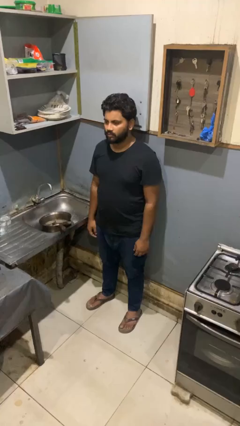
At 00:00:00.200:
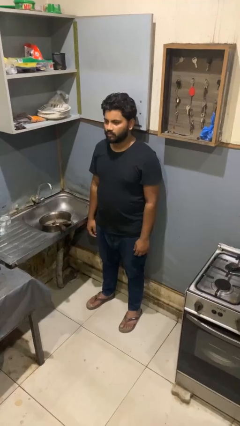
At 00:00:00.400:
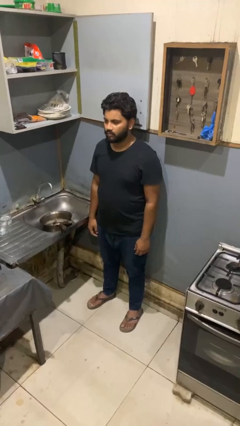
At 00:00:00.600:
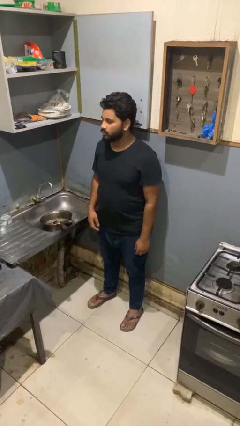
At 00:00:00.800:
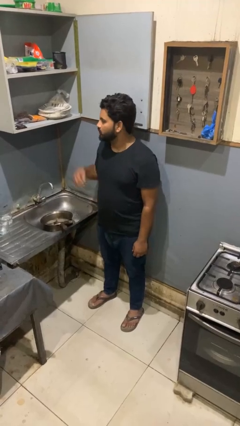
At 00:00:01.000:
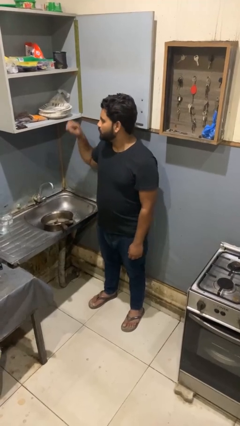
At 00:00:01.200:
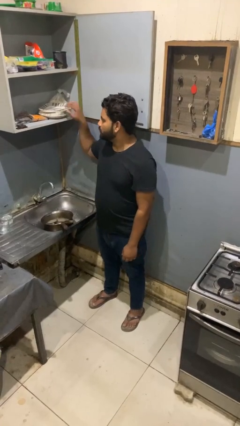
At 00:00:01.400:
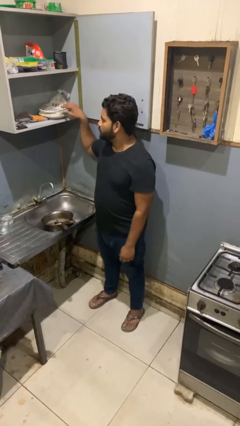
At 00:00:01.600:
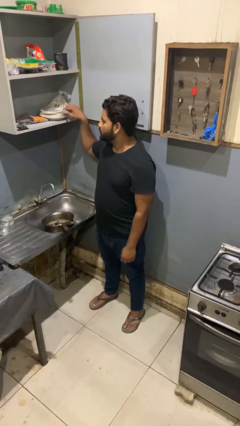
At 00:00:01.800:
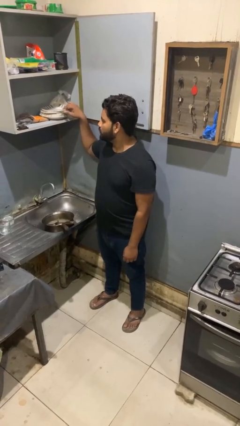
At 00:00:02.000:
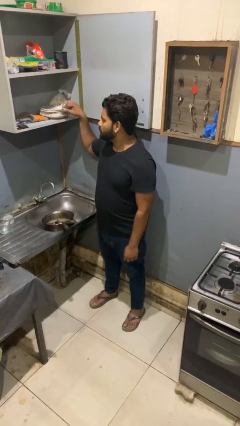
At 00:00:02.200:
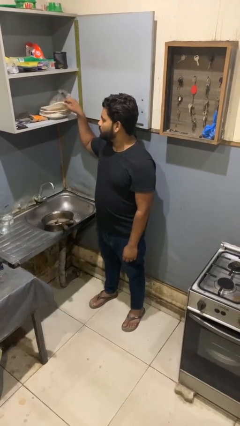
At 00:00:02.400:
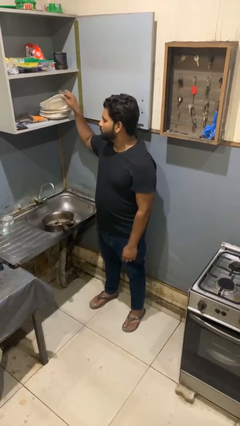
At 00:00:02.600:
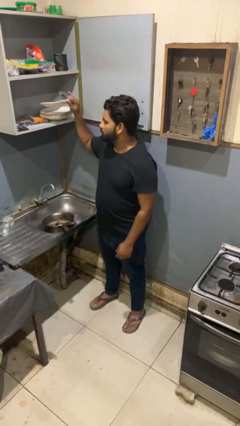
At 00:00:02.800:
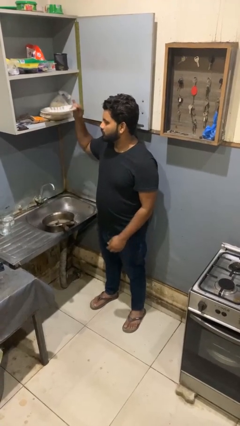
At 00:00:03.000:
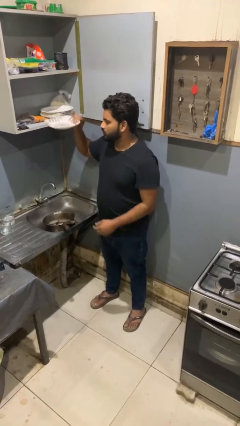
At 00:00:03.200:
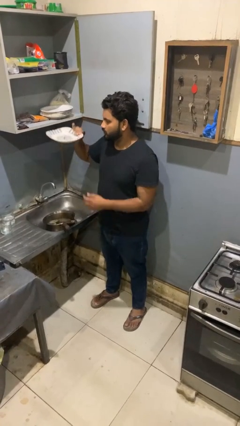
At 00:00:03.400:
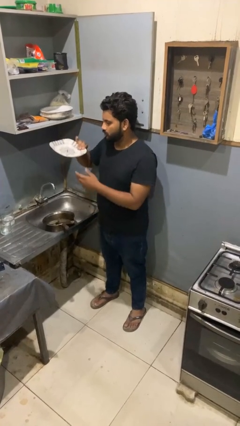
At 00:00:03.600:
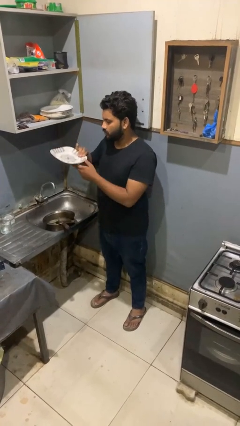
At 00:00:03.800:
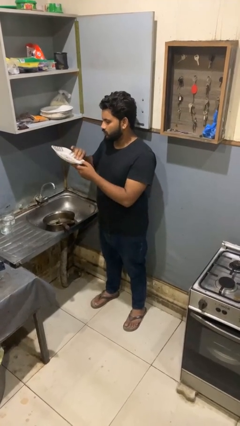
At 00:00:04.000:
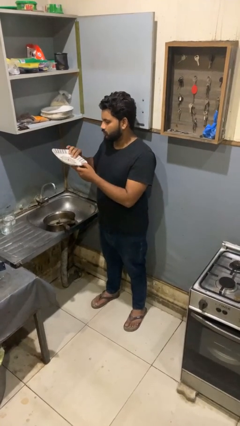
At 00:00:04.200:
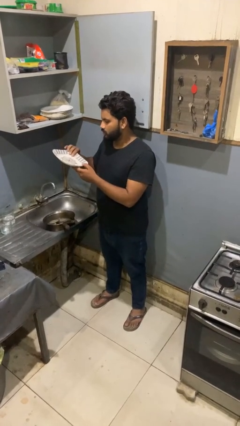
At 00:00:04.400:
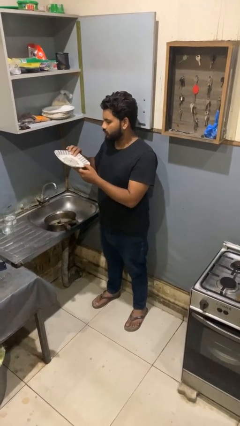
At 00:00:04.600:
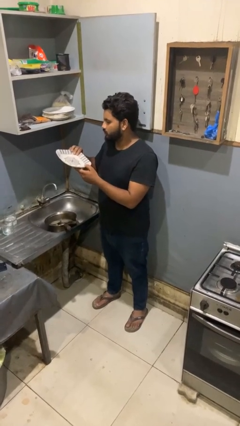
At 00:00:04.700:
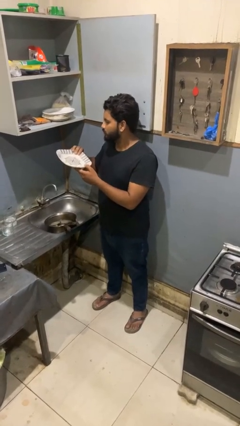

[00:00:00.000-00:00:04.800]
person takes object from kitchen drawer

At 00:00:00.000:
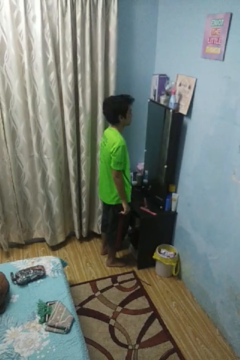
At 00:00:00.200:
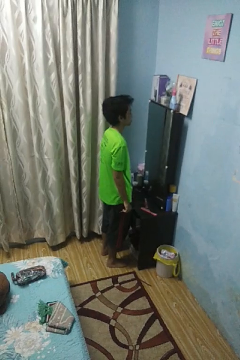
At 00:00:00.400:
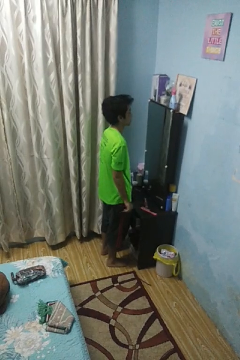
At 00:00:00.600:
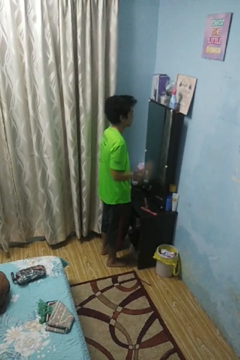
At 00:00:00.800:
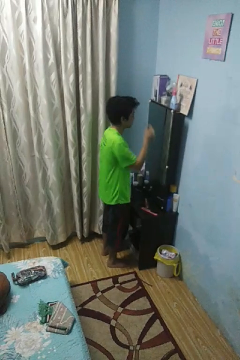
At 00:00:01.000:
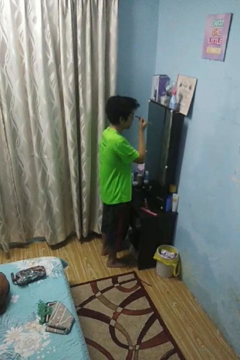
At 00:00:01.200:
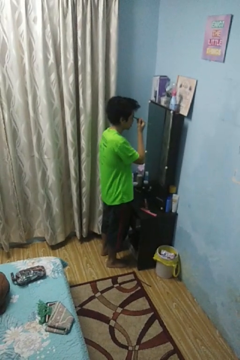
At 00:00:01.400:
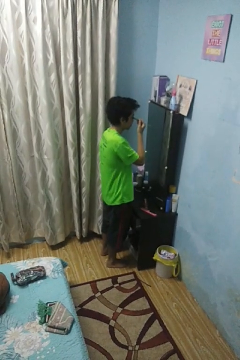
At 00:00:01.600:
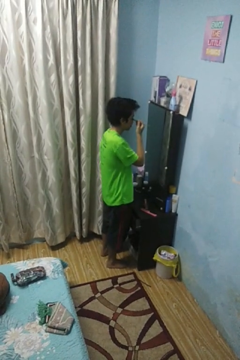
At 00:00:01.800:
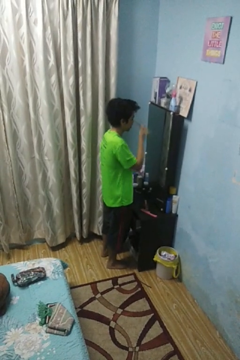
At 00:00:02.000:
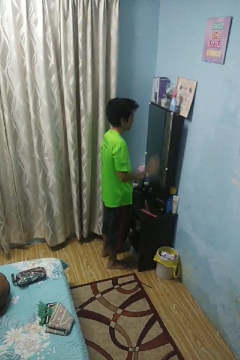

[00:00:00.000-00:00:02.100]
person applies eye makeup

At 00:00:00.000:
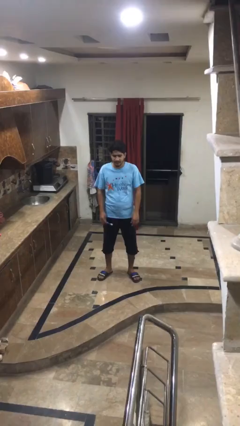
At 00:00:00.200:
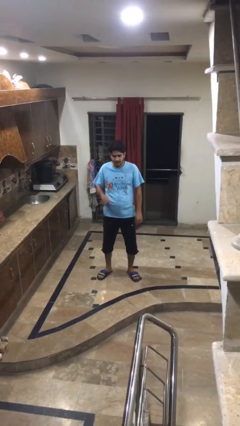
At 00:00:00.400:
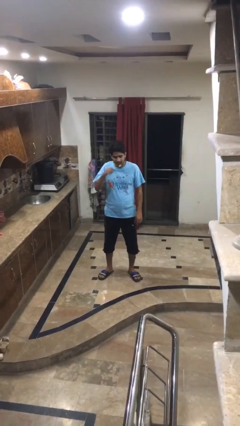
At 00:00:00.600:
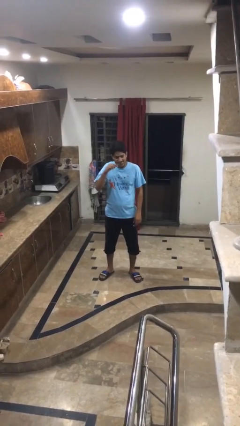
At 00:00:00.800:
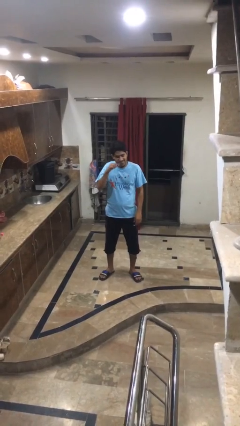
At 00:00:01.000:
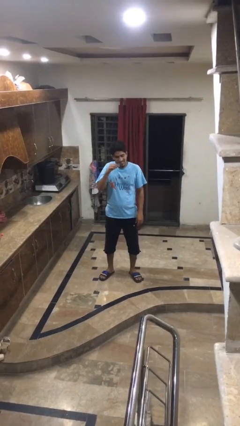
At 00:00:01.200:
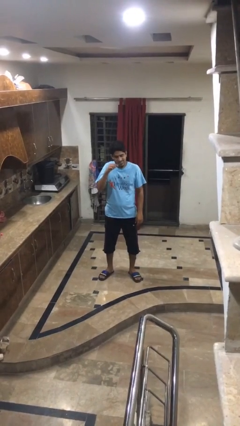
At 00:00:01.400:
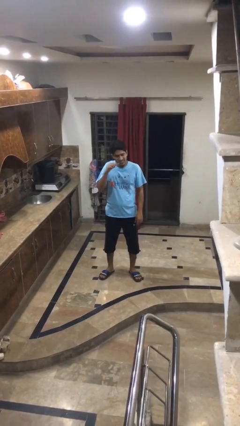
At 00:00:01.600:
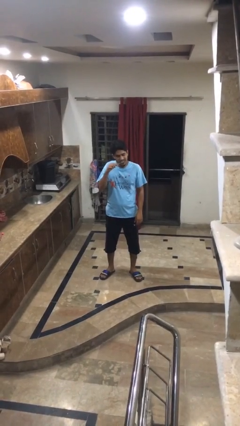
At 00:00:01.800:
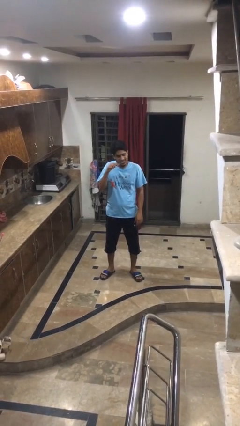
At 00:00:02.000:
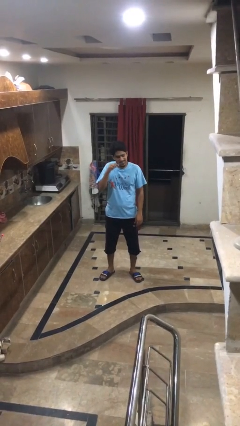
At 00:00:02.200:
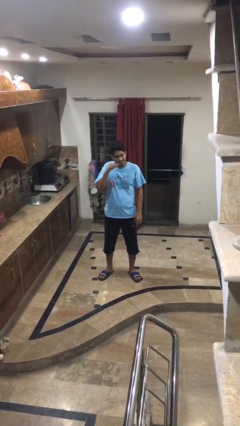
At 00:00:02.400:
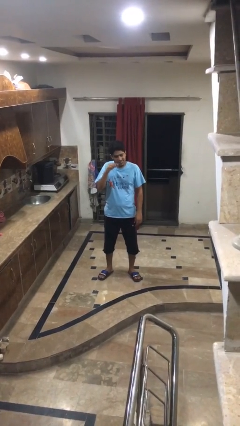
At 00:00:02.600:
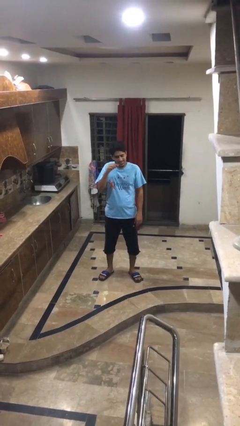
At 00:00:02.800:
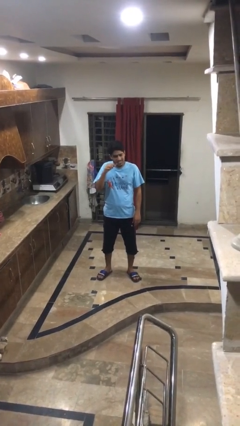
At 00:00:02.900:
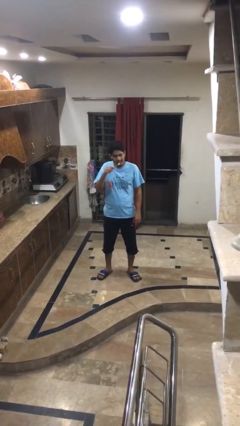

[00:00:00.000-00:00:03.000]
person brushes teeth

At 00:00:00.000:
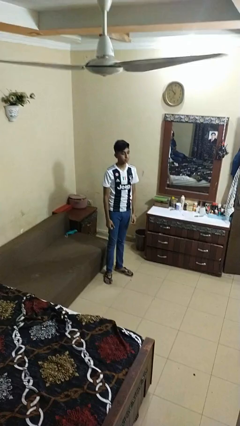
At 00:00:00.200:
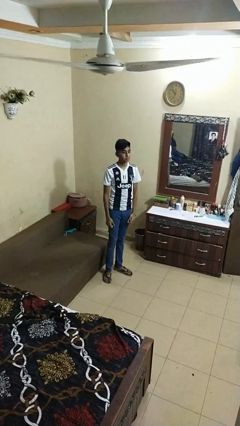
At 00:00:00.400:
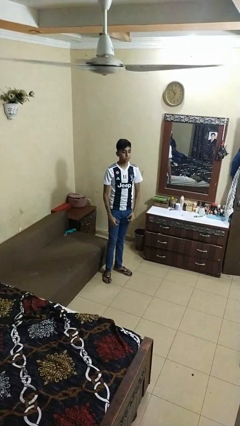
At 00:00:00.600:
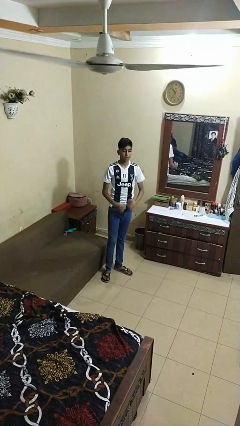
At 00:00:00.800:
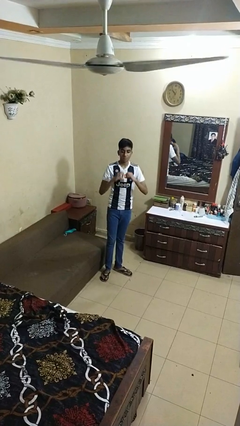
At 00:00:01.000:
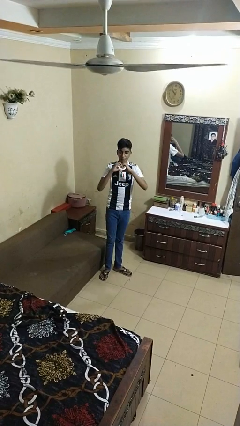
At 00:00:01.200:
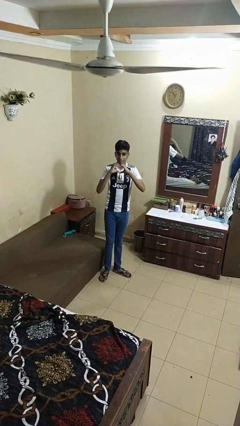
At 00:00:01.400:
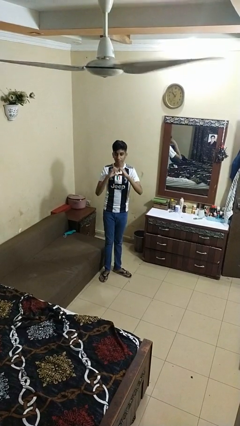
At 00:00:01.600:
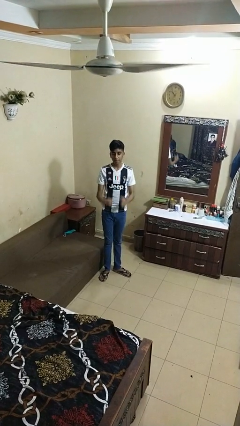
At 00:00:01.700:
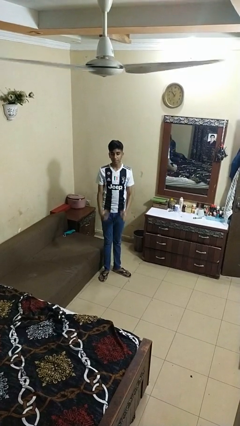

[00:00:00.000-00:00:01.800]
person gestures heart

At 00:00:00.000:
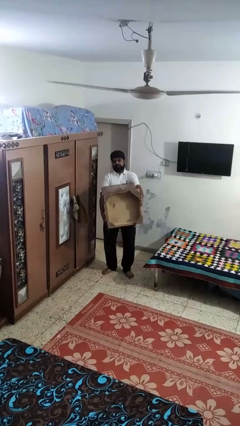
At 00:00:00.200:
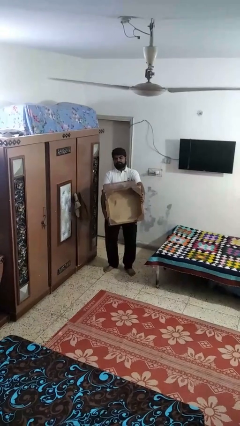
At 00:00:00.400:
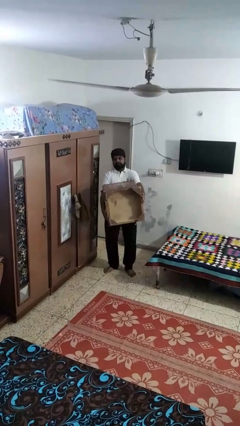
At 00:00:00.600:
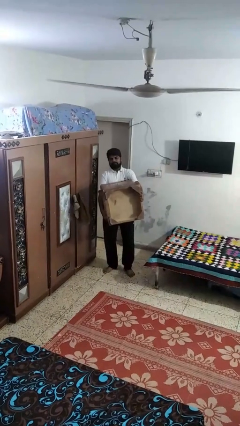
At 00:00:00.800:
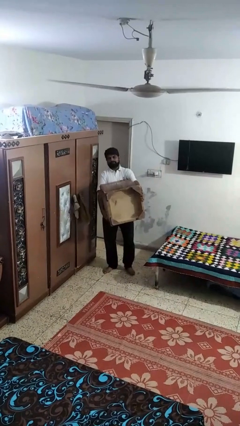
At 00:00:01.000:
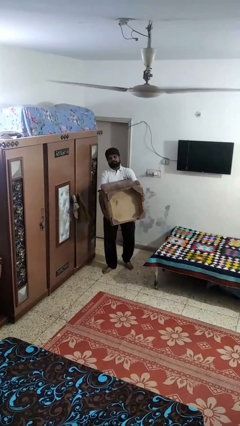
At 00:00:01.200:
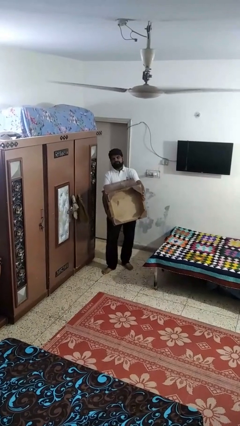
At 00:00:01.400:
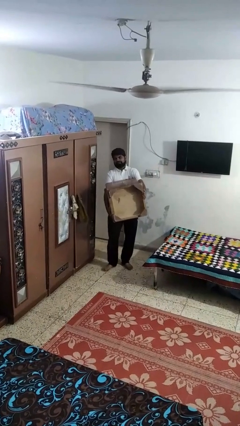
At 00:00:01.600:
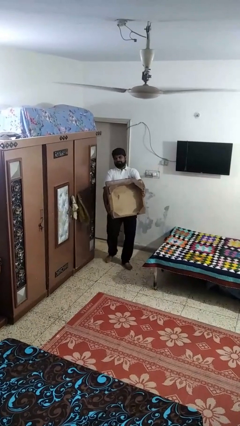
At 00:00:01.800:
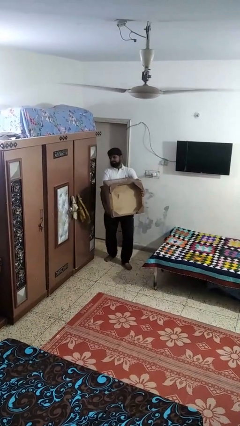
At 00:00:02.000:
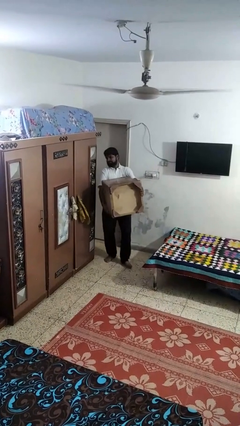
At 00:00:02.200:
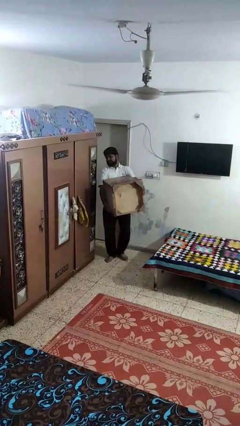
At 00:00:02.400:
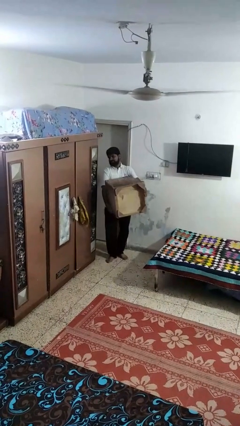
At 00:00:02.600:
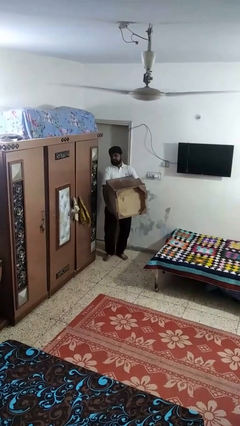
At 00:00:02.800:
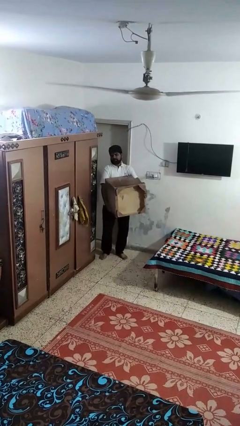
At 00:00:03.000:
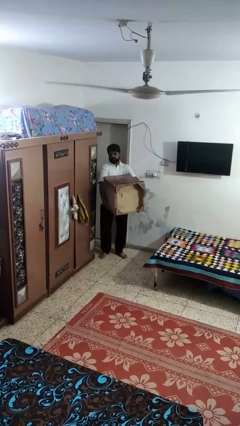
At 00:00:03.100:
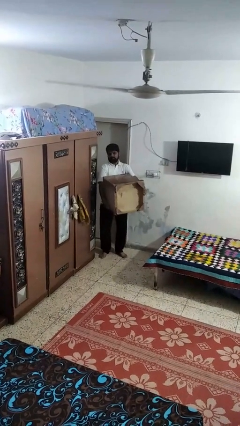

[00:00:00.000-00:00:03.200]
person carries furniture

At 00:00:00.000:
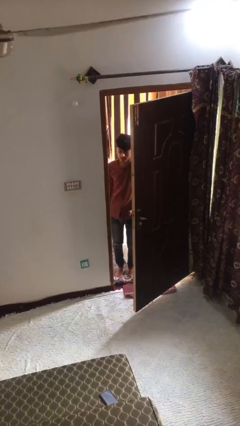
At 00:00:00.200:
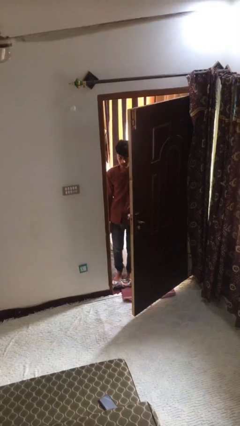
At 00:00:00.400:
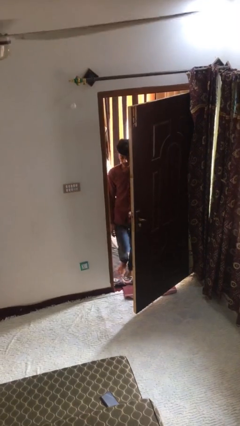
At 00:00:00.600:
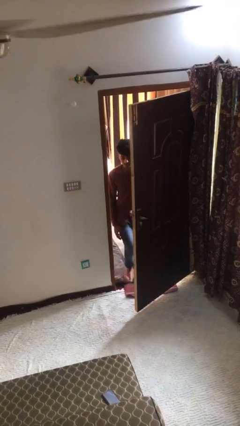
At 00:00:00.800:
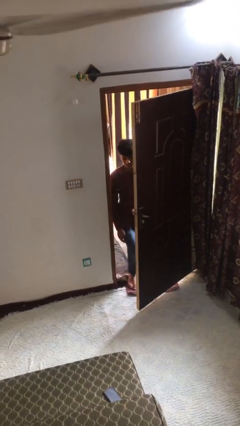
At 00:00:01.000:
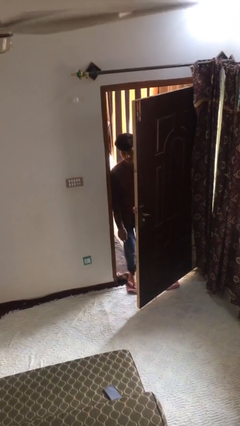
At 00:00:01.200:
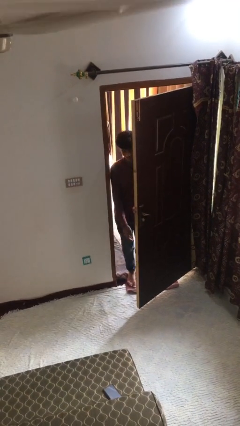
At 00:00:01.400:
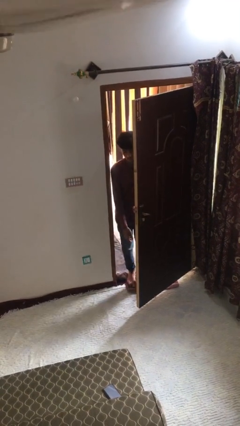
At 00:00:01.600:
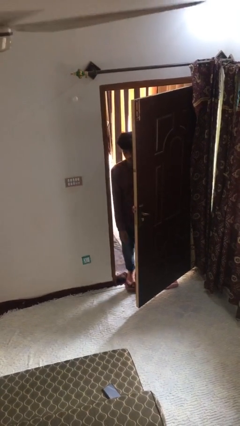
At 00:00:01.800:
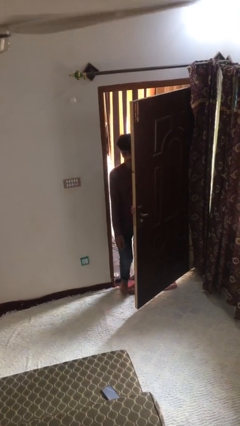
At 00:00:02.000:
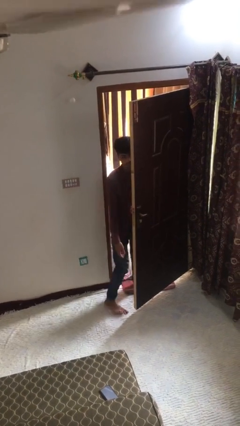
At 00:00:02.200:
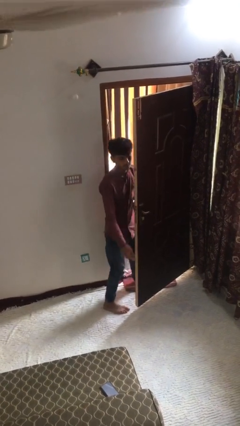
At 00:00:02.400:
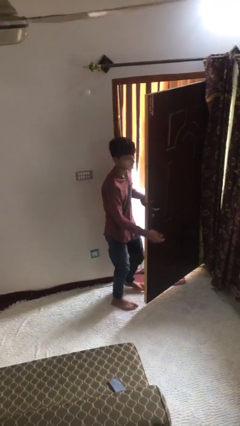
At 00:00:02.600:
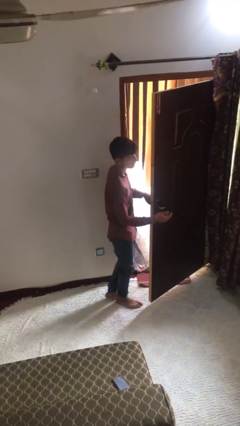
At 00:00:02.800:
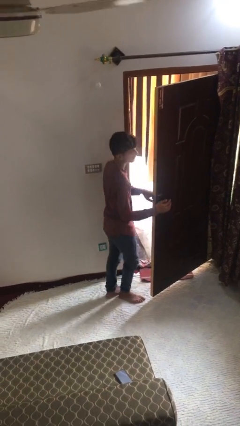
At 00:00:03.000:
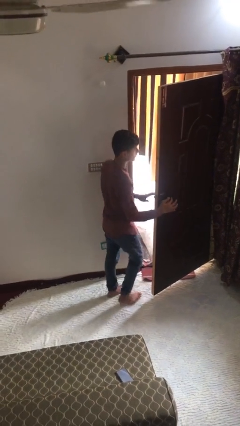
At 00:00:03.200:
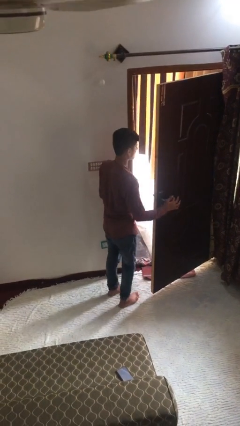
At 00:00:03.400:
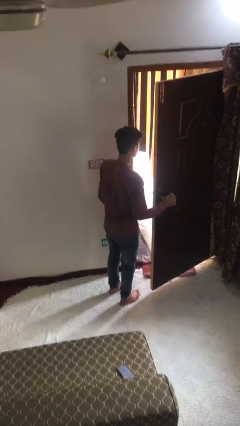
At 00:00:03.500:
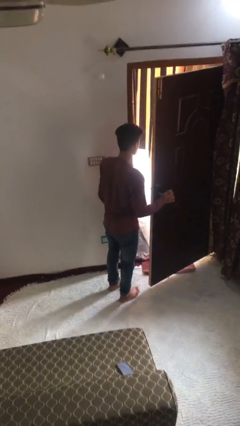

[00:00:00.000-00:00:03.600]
person enters scene through structure
